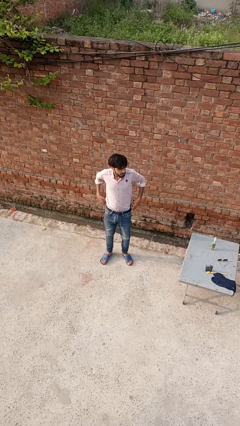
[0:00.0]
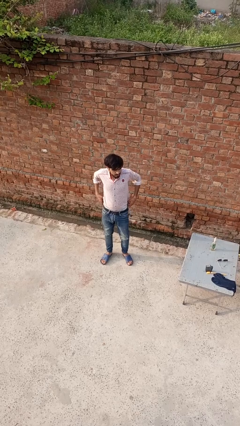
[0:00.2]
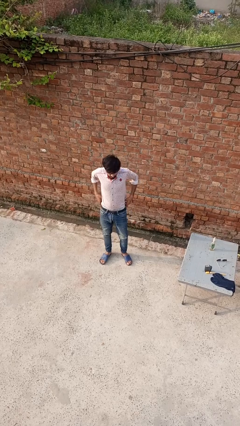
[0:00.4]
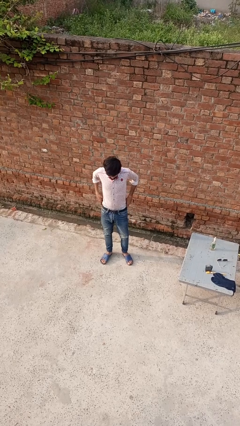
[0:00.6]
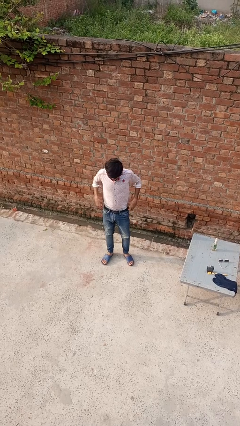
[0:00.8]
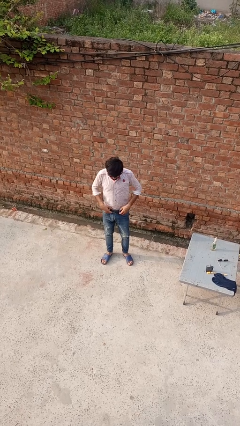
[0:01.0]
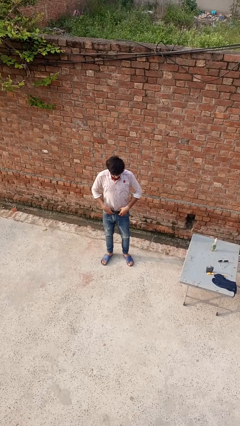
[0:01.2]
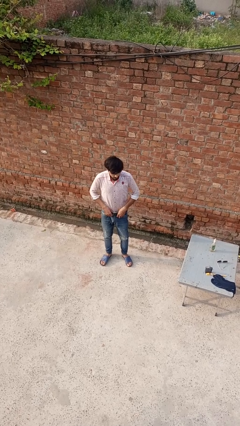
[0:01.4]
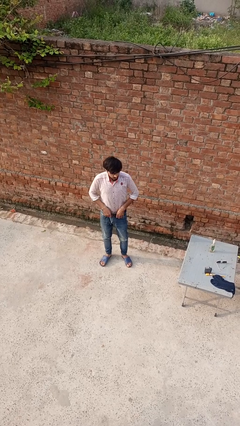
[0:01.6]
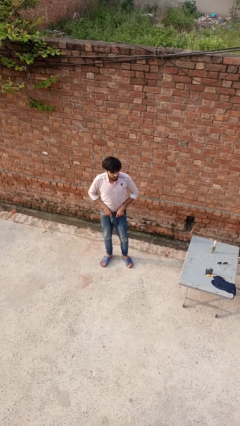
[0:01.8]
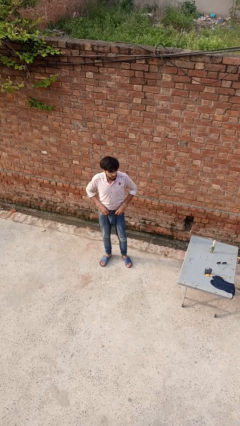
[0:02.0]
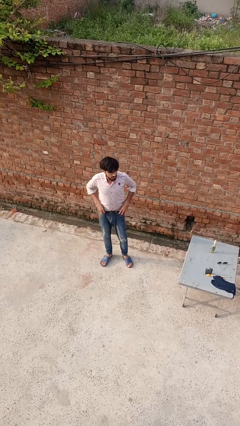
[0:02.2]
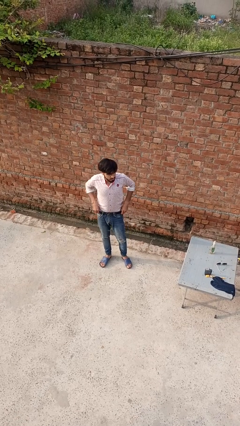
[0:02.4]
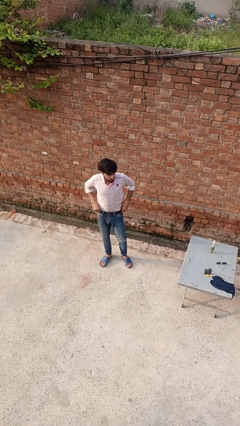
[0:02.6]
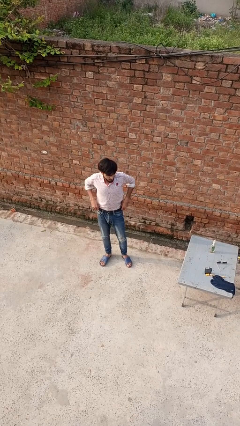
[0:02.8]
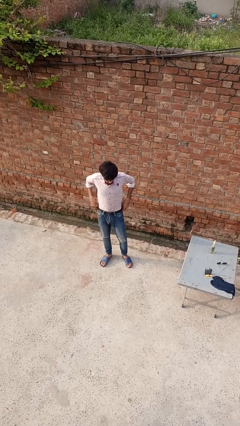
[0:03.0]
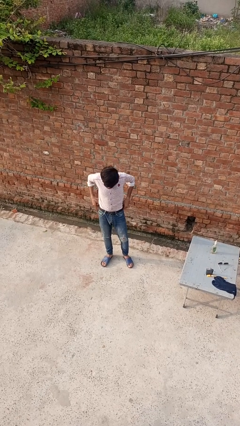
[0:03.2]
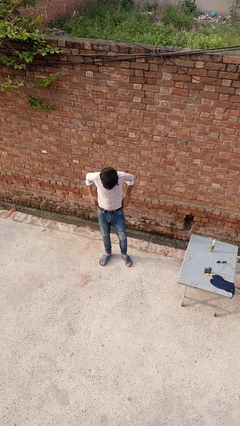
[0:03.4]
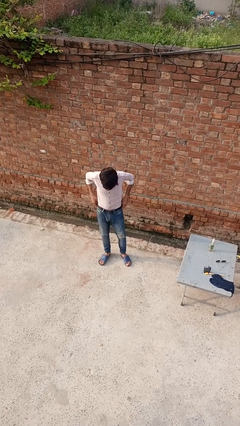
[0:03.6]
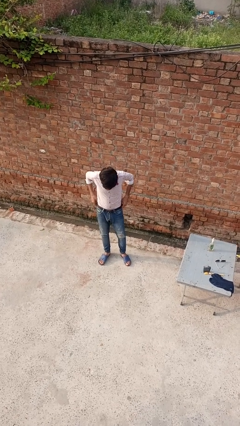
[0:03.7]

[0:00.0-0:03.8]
person hikes up pants

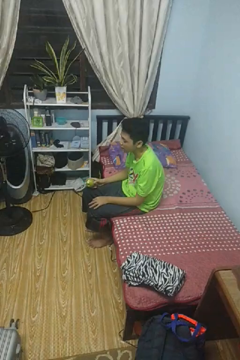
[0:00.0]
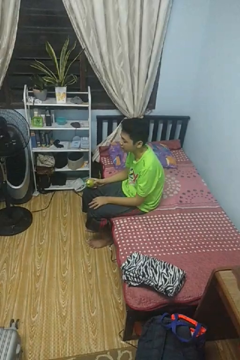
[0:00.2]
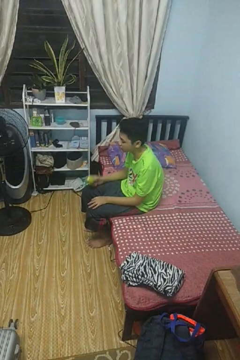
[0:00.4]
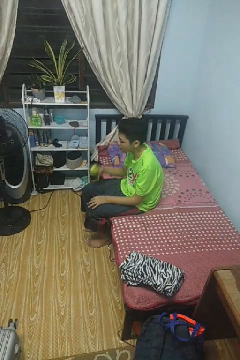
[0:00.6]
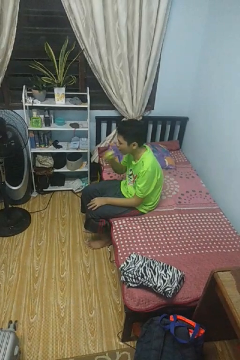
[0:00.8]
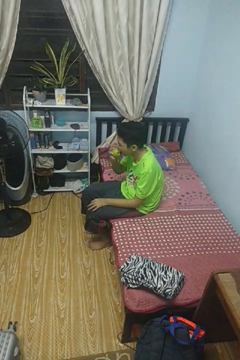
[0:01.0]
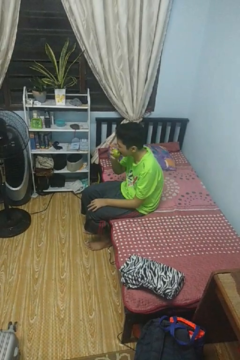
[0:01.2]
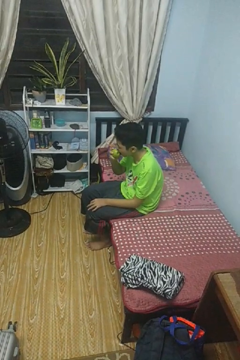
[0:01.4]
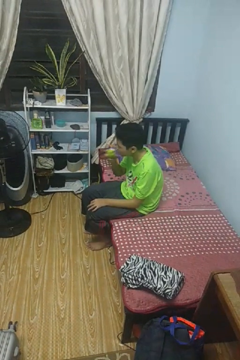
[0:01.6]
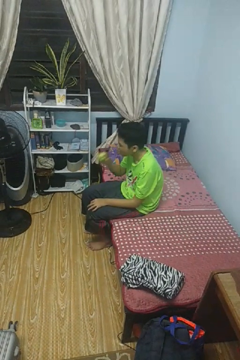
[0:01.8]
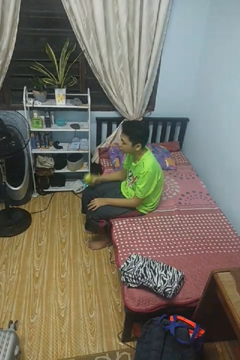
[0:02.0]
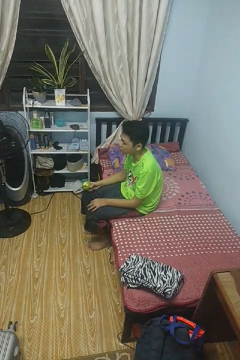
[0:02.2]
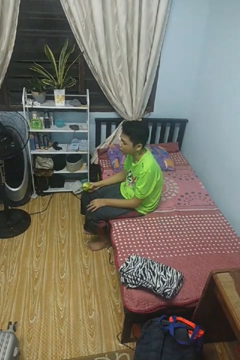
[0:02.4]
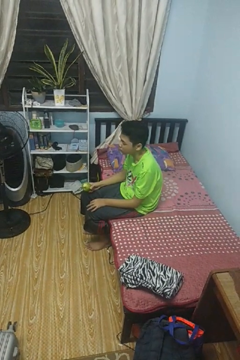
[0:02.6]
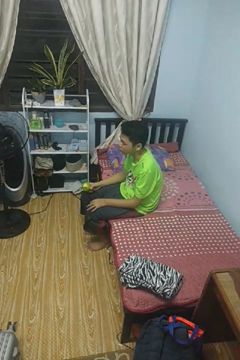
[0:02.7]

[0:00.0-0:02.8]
person eats apple

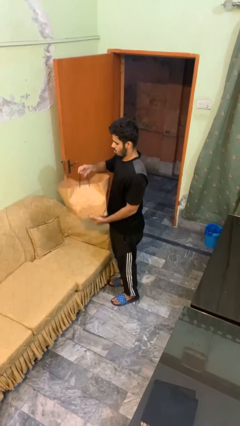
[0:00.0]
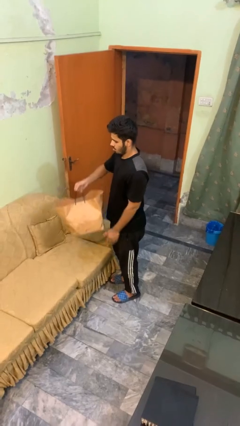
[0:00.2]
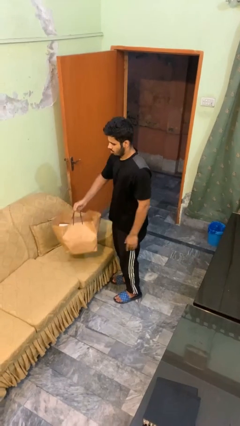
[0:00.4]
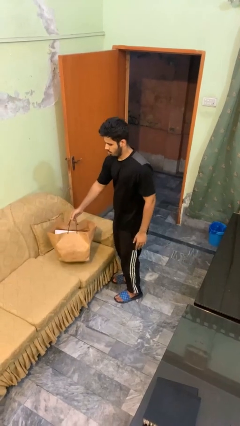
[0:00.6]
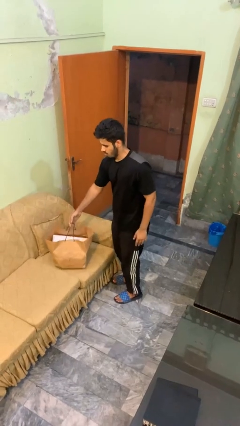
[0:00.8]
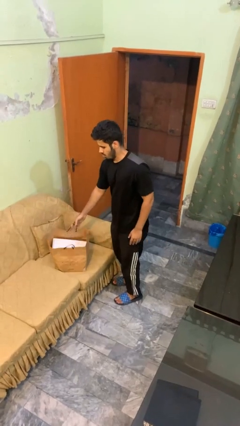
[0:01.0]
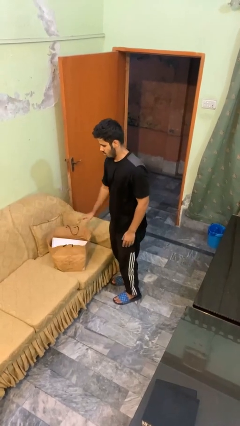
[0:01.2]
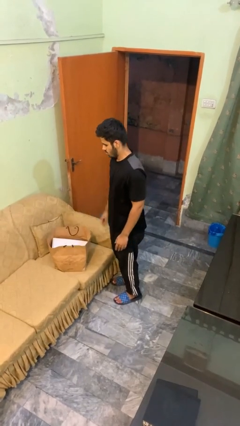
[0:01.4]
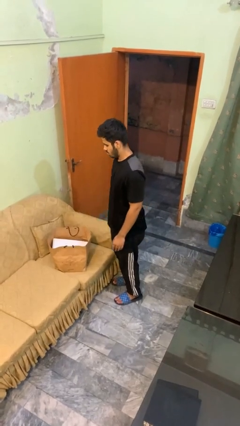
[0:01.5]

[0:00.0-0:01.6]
person puts down object on couch

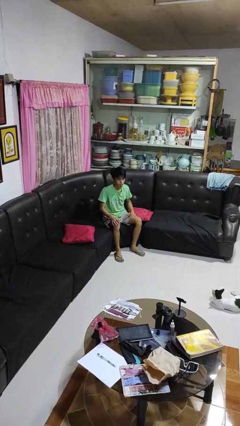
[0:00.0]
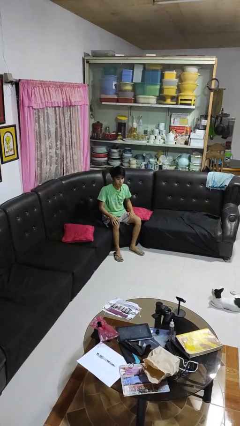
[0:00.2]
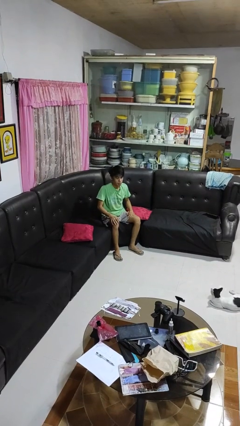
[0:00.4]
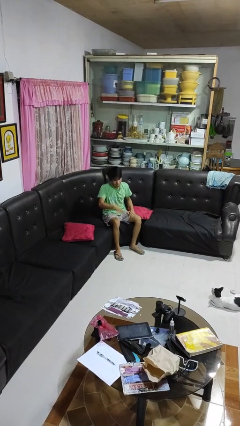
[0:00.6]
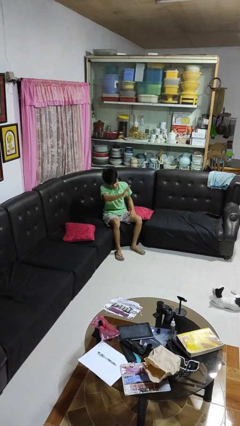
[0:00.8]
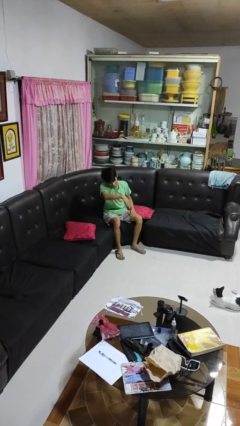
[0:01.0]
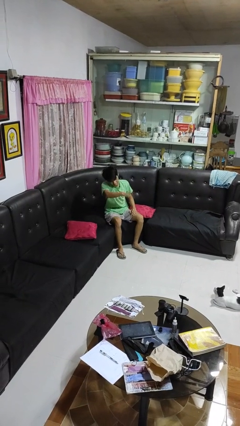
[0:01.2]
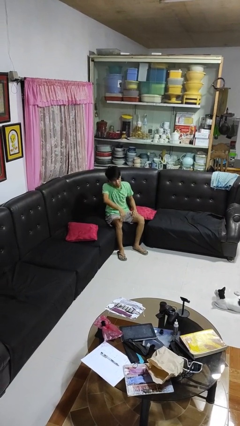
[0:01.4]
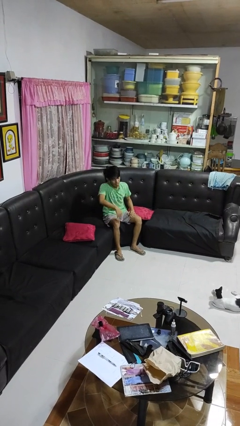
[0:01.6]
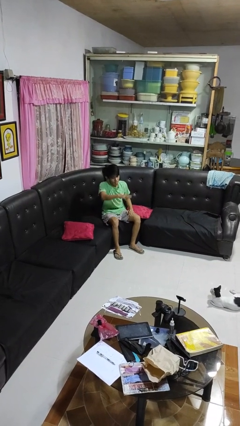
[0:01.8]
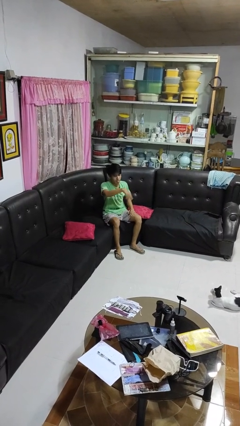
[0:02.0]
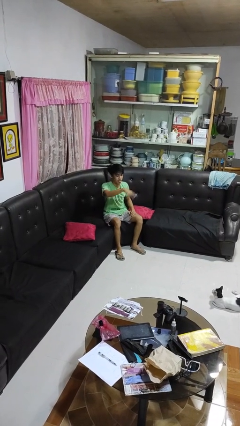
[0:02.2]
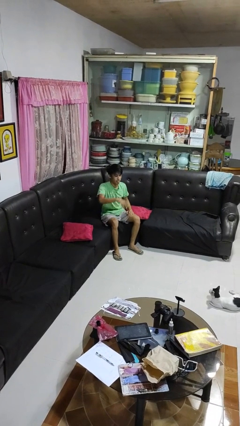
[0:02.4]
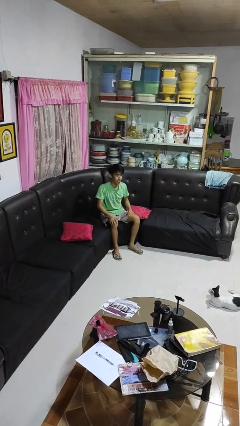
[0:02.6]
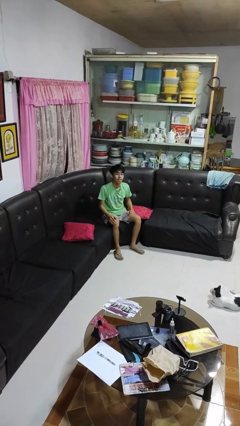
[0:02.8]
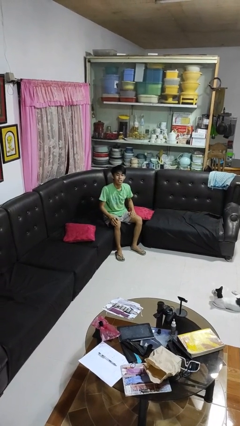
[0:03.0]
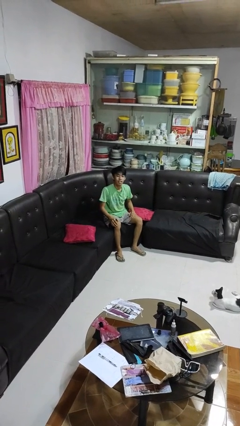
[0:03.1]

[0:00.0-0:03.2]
person gestures come here

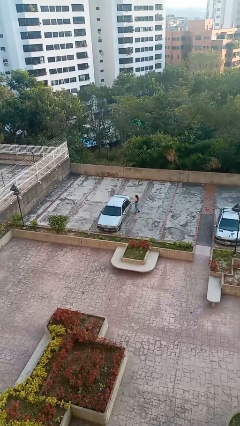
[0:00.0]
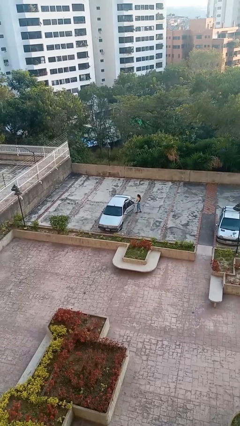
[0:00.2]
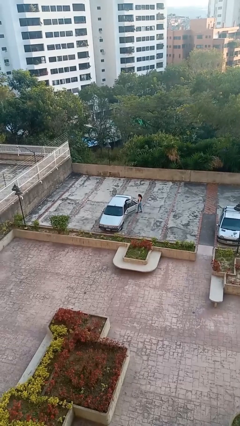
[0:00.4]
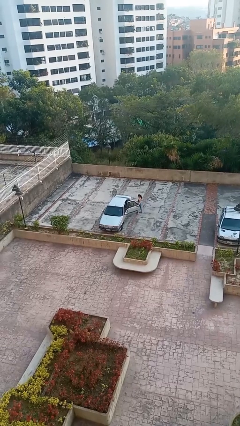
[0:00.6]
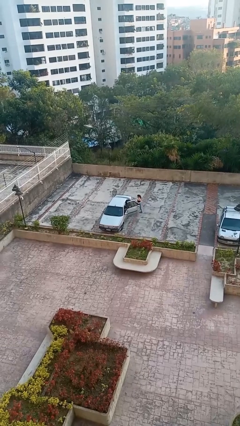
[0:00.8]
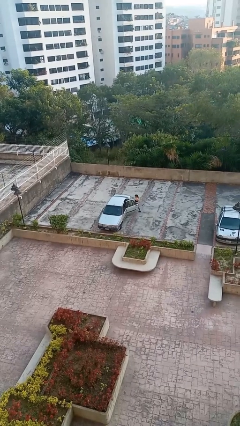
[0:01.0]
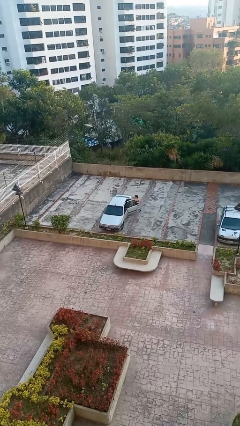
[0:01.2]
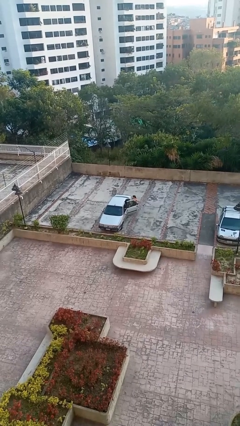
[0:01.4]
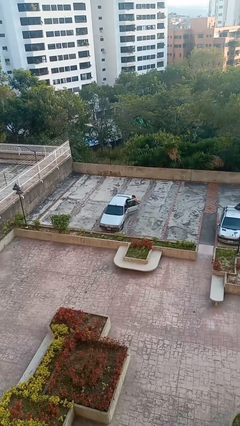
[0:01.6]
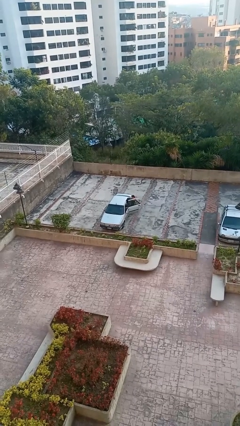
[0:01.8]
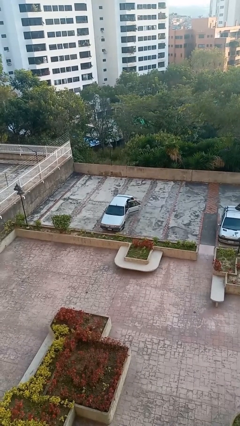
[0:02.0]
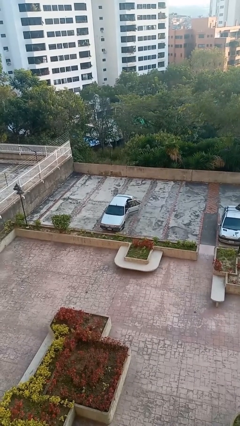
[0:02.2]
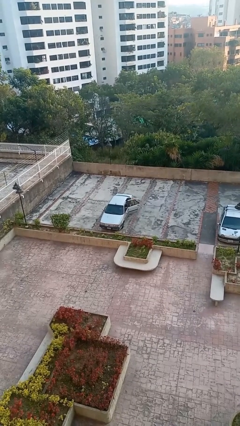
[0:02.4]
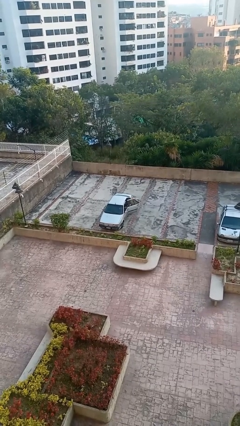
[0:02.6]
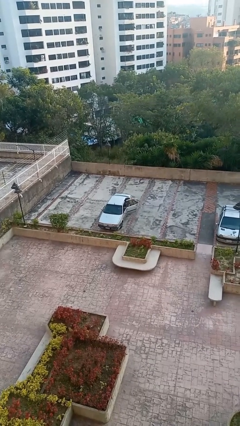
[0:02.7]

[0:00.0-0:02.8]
car picks up person

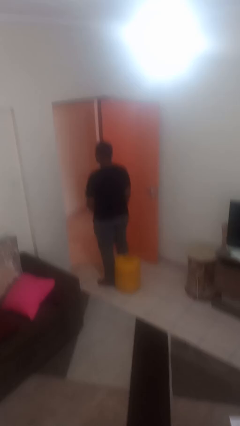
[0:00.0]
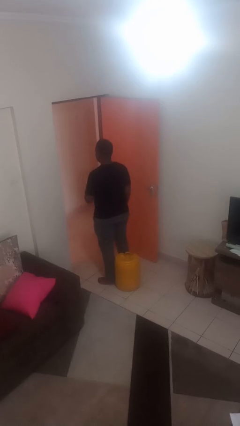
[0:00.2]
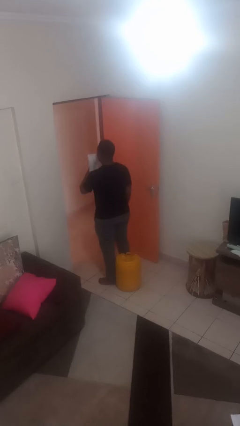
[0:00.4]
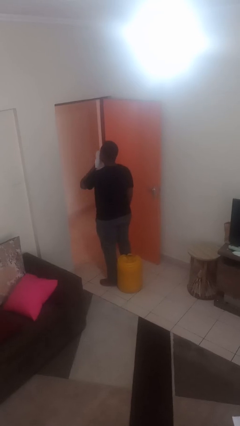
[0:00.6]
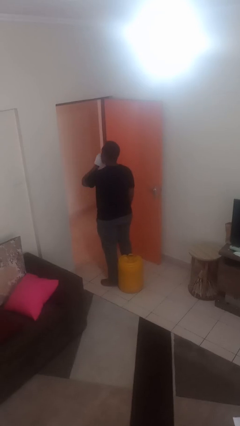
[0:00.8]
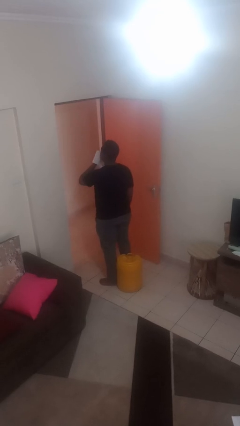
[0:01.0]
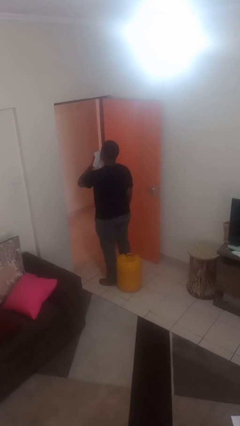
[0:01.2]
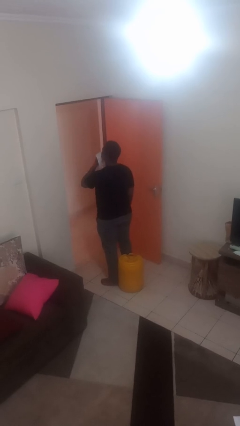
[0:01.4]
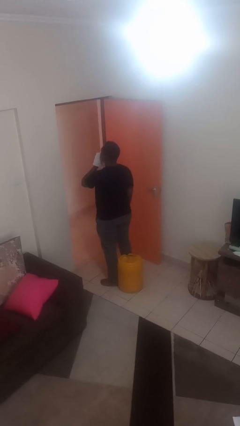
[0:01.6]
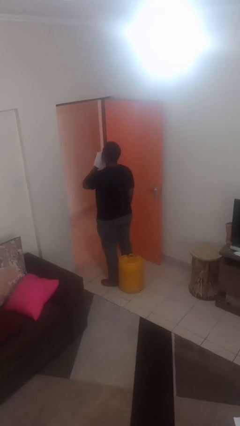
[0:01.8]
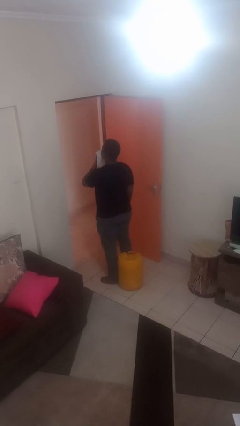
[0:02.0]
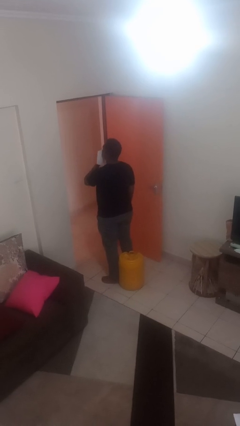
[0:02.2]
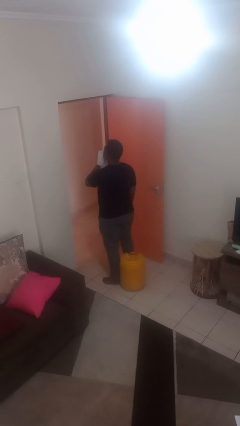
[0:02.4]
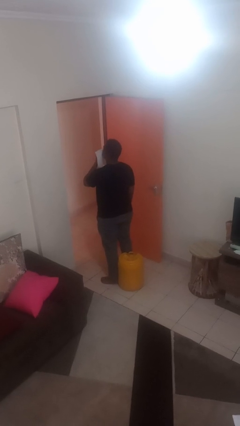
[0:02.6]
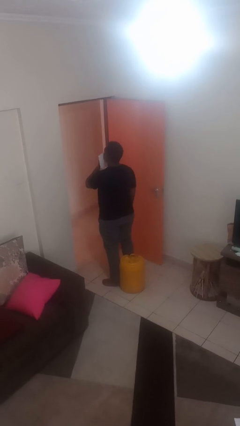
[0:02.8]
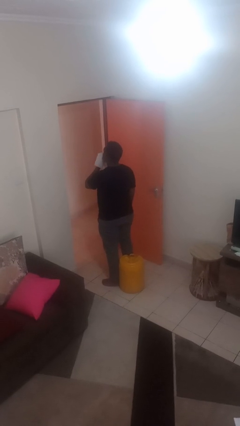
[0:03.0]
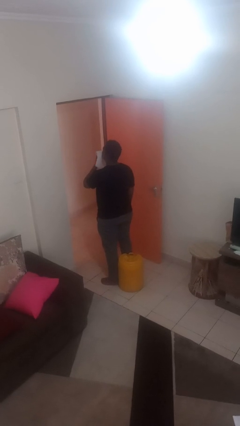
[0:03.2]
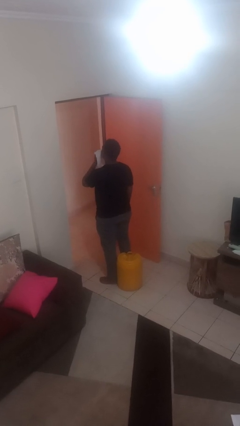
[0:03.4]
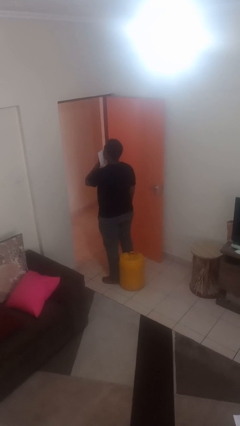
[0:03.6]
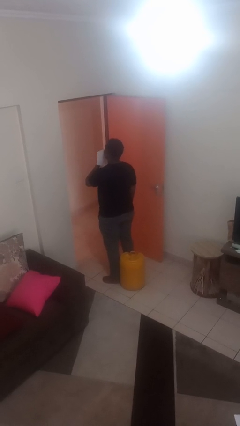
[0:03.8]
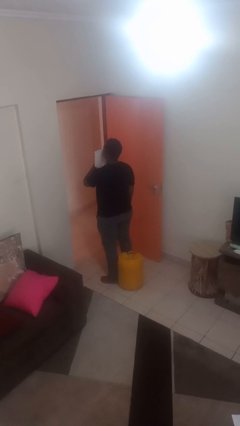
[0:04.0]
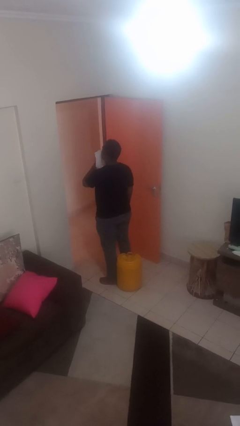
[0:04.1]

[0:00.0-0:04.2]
person wipes mouth with napkin
